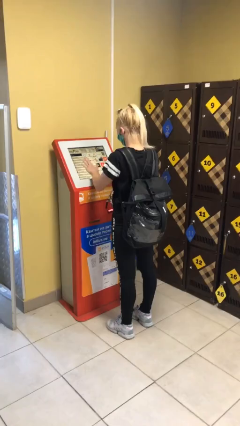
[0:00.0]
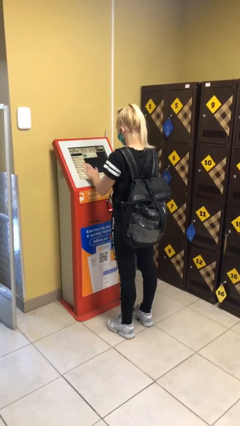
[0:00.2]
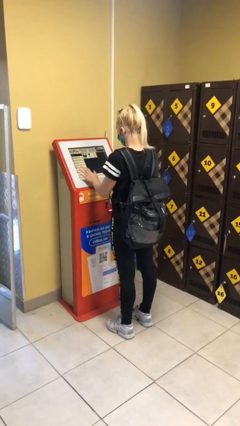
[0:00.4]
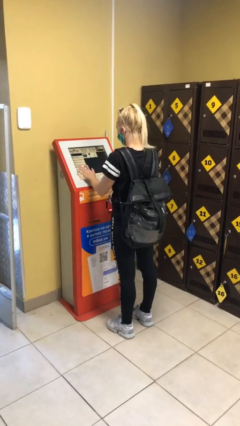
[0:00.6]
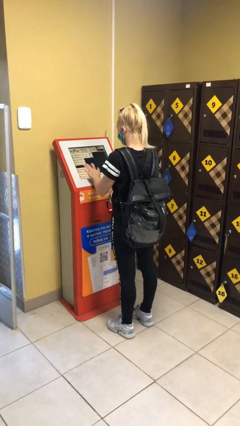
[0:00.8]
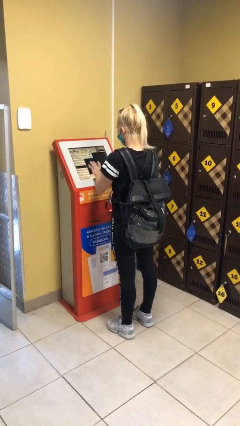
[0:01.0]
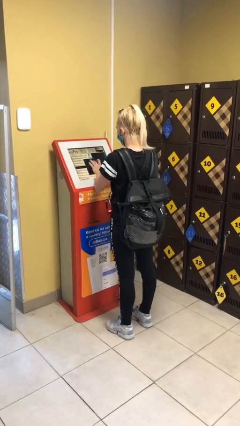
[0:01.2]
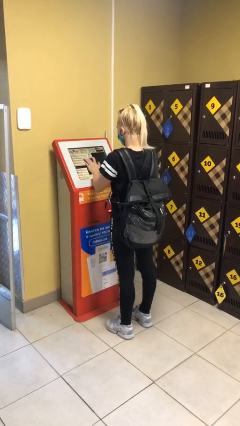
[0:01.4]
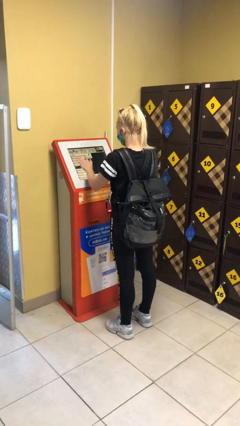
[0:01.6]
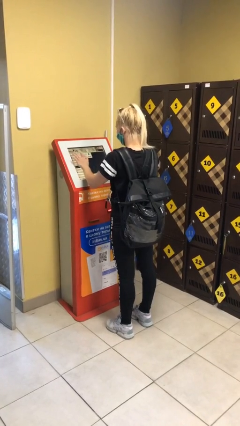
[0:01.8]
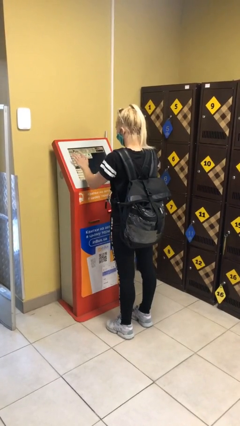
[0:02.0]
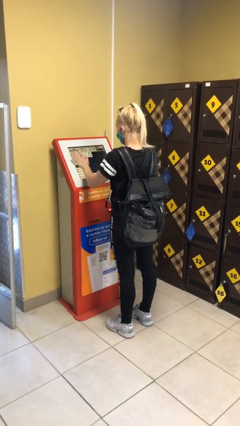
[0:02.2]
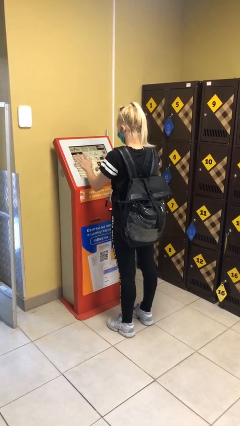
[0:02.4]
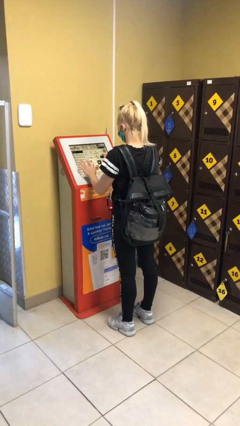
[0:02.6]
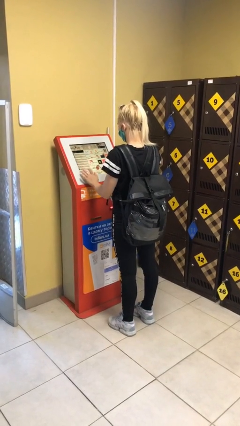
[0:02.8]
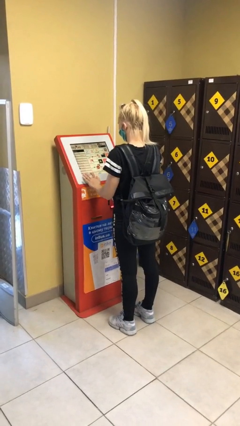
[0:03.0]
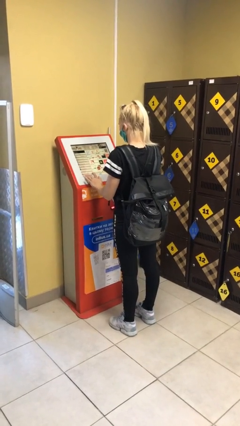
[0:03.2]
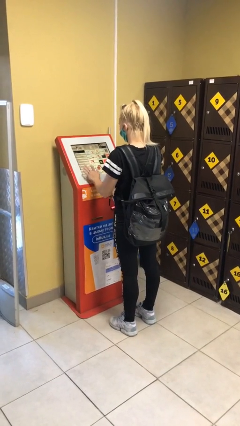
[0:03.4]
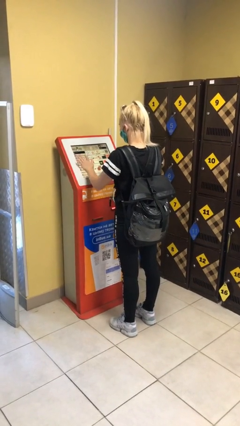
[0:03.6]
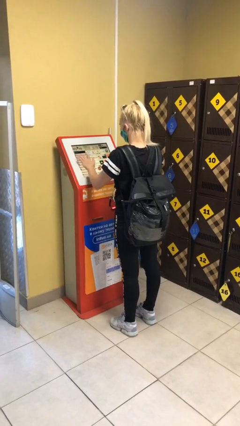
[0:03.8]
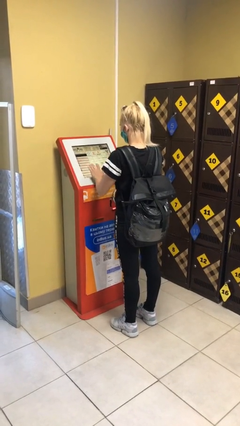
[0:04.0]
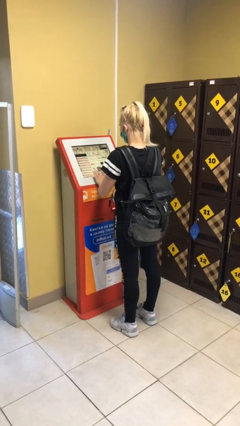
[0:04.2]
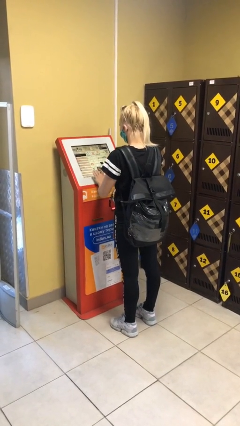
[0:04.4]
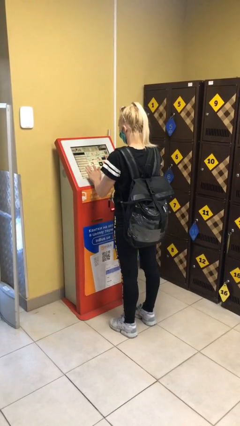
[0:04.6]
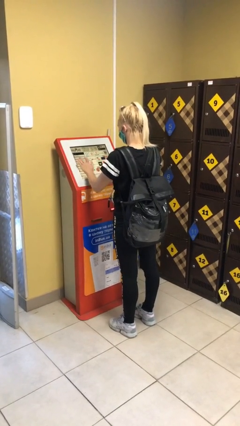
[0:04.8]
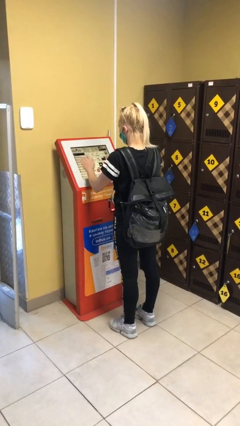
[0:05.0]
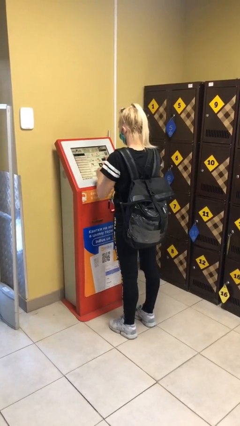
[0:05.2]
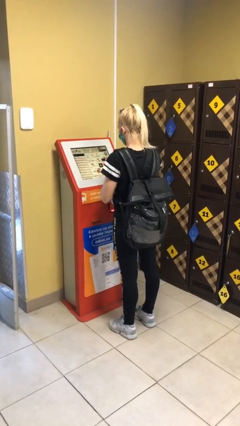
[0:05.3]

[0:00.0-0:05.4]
person purchases from machine

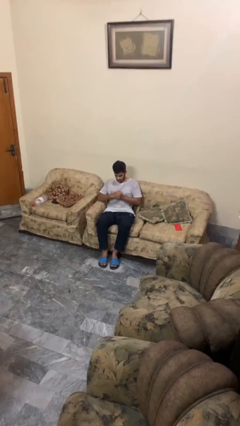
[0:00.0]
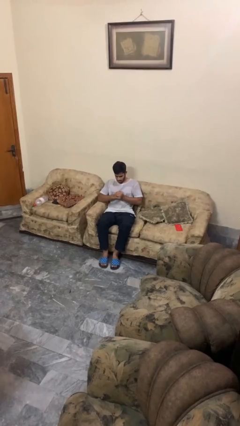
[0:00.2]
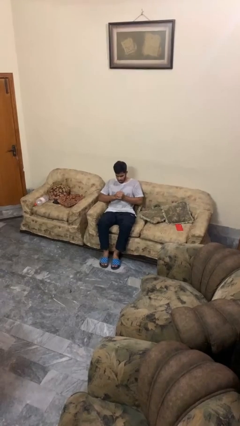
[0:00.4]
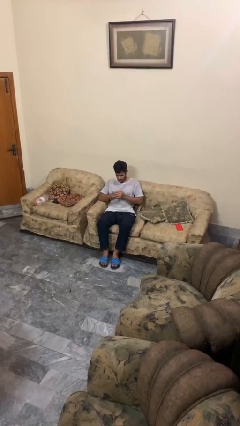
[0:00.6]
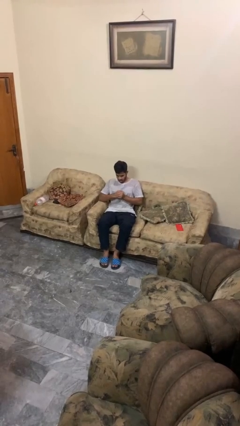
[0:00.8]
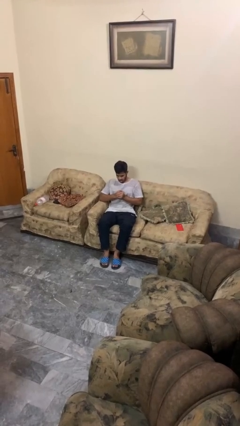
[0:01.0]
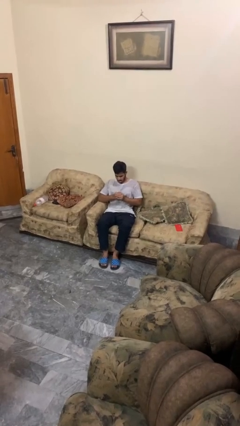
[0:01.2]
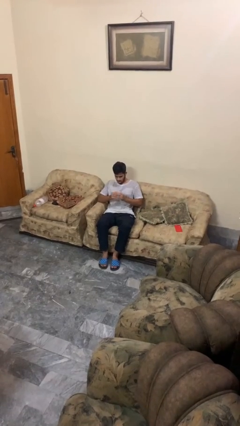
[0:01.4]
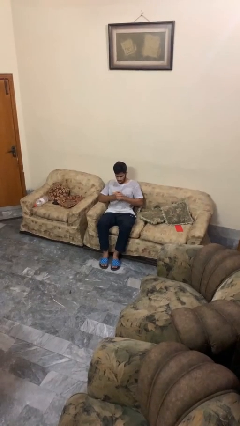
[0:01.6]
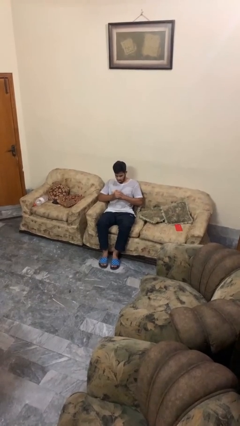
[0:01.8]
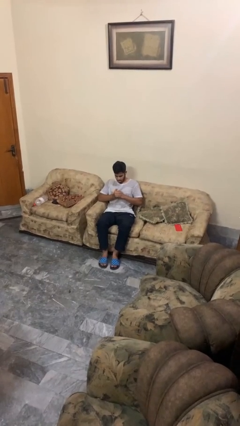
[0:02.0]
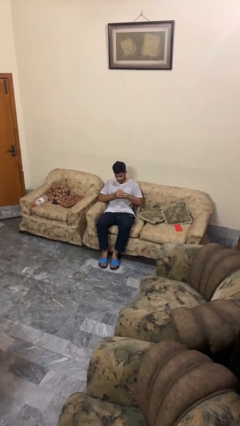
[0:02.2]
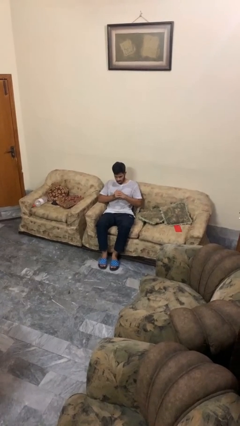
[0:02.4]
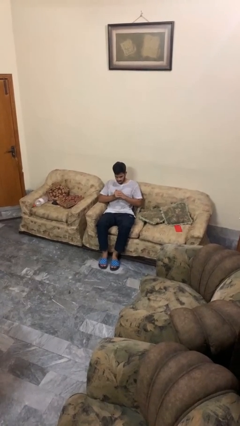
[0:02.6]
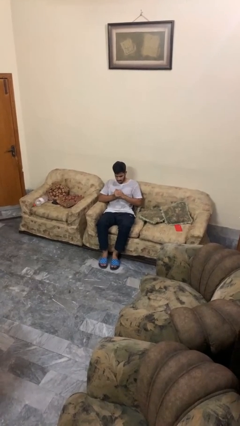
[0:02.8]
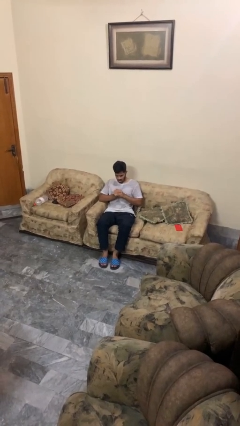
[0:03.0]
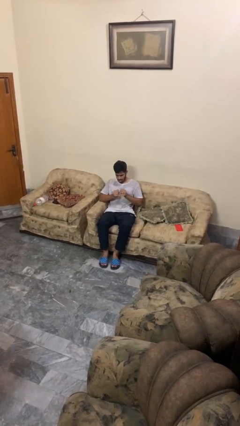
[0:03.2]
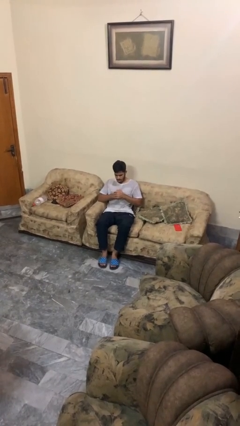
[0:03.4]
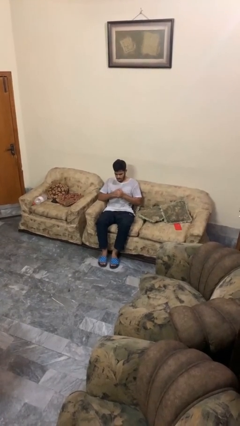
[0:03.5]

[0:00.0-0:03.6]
person cracks knuckles

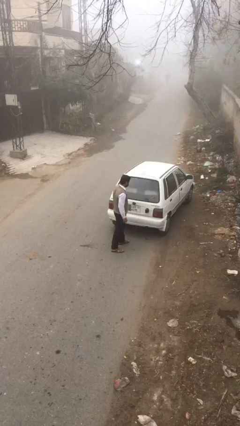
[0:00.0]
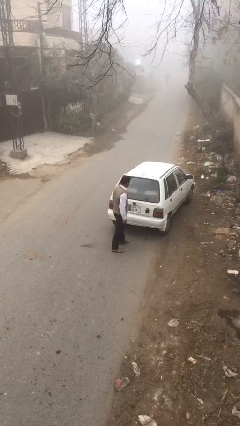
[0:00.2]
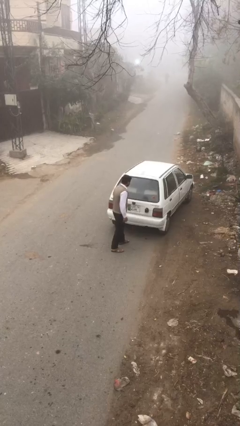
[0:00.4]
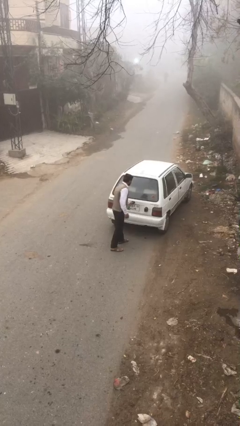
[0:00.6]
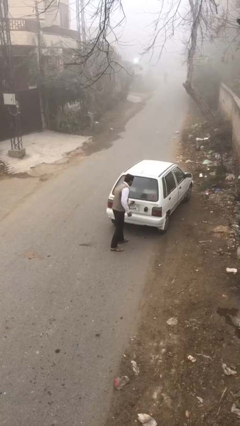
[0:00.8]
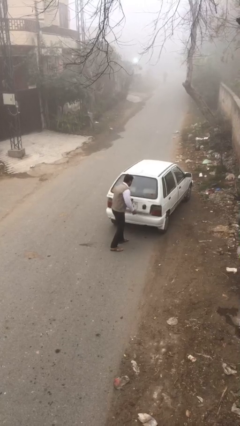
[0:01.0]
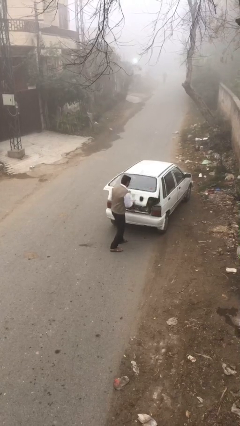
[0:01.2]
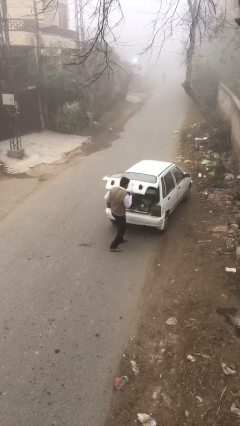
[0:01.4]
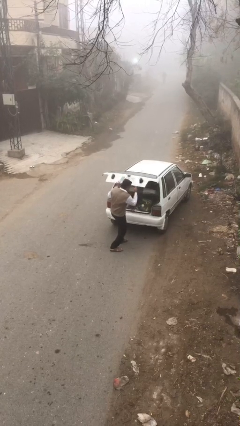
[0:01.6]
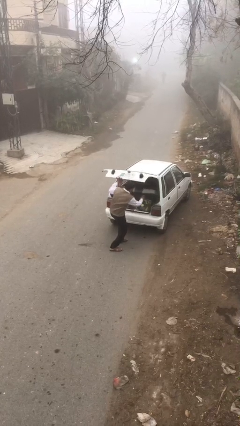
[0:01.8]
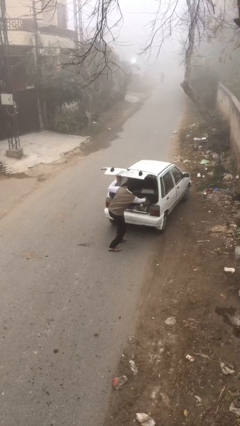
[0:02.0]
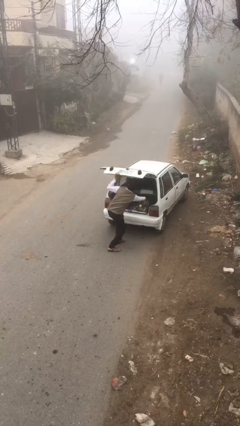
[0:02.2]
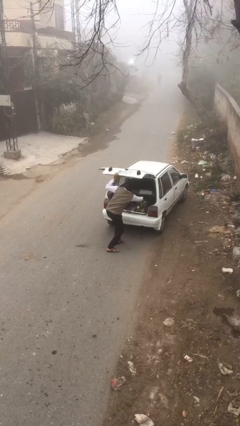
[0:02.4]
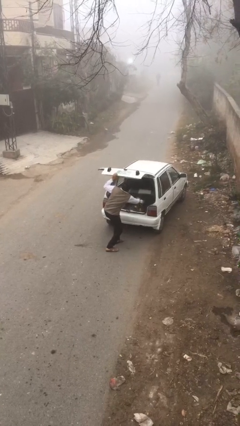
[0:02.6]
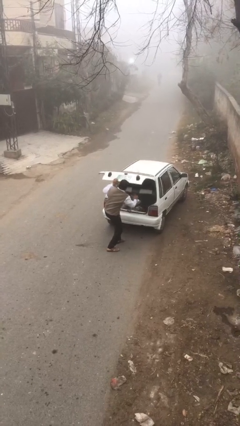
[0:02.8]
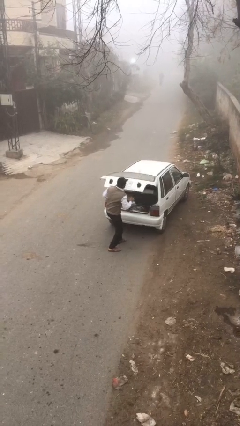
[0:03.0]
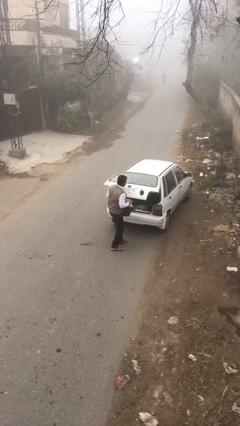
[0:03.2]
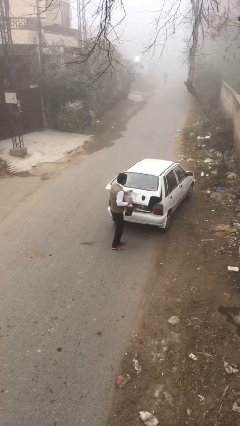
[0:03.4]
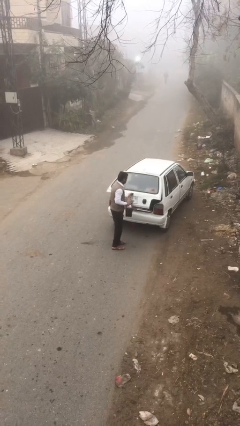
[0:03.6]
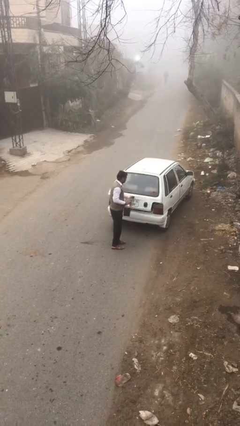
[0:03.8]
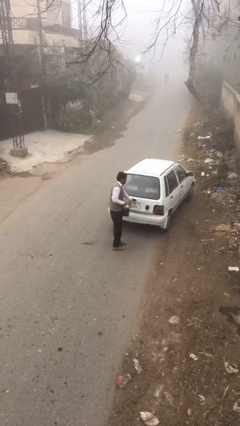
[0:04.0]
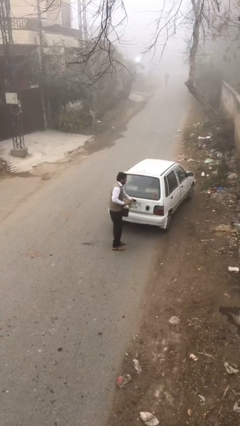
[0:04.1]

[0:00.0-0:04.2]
person unloads car

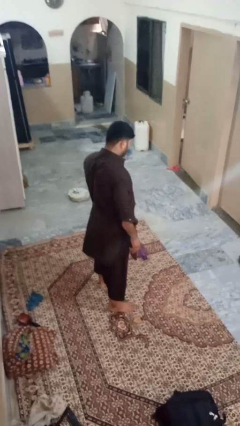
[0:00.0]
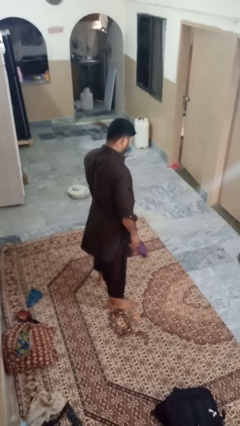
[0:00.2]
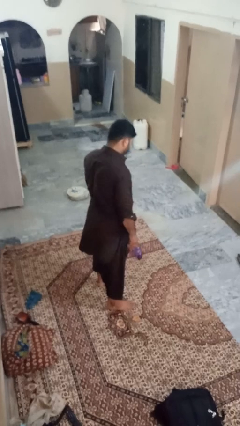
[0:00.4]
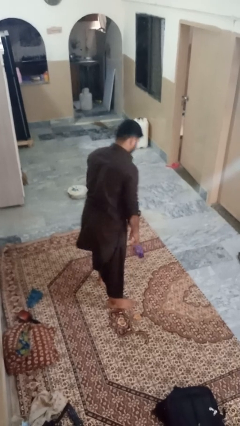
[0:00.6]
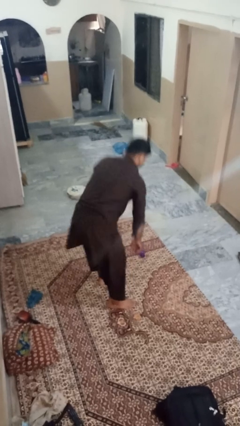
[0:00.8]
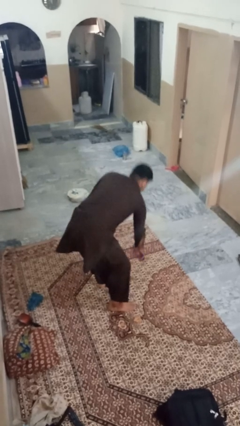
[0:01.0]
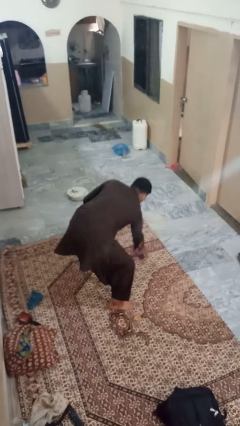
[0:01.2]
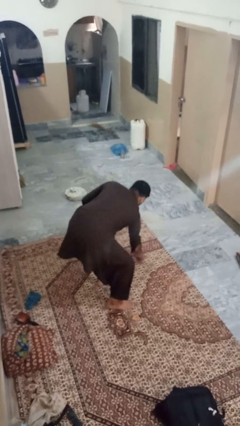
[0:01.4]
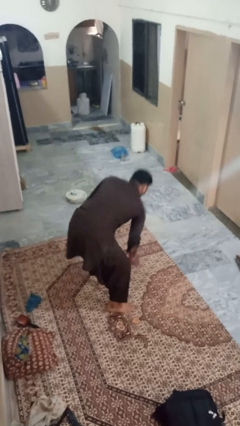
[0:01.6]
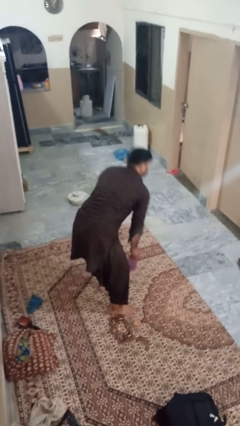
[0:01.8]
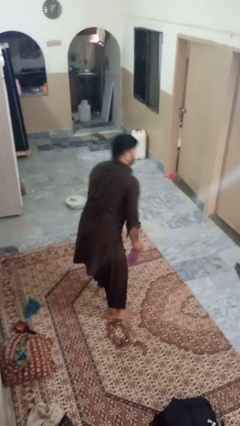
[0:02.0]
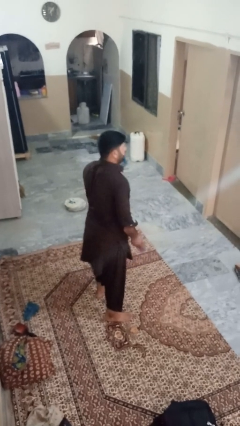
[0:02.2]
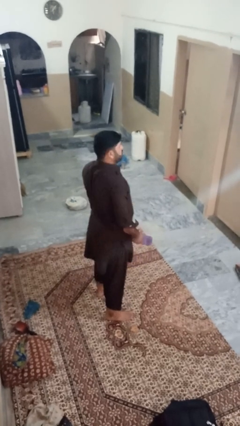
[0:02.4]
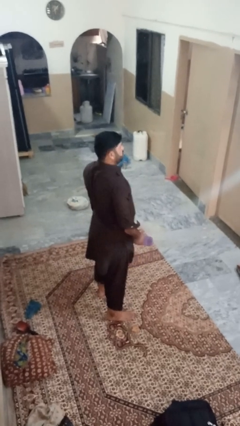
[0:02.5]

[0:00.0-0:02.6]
person picks up object from floor

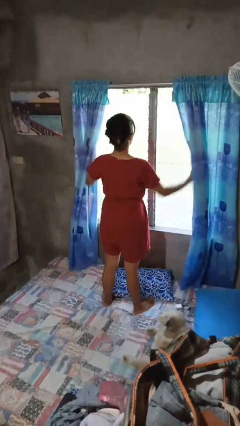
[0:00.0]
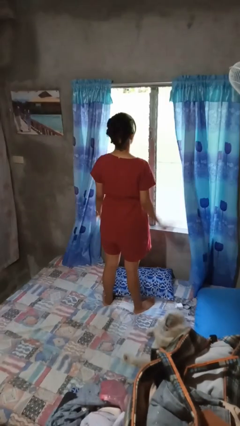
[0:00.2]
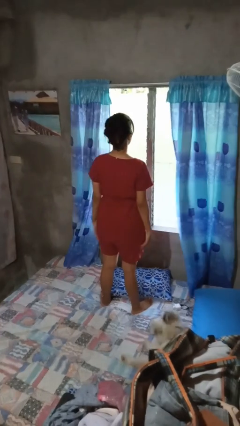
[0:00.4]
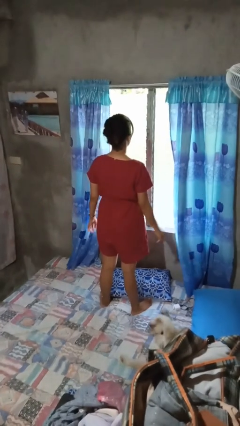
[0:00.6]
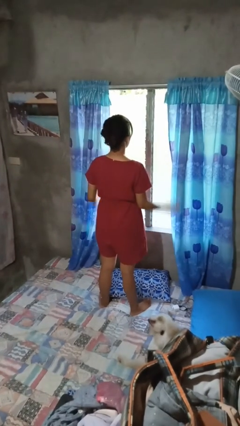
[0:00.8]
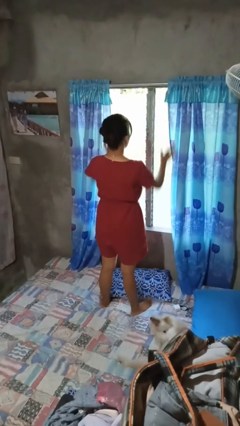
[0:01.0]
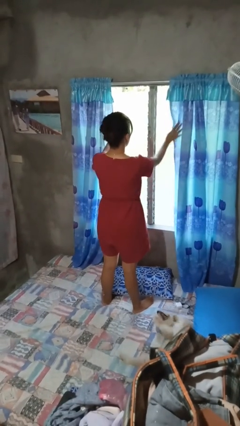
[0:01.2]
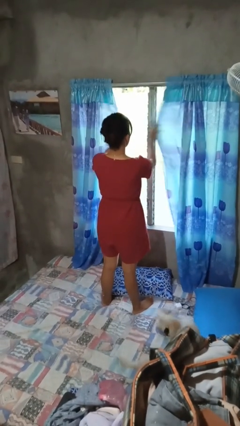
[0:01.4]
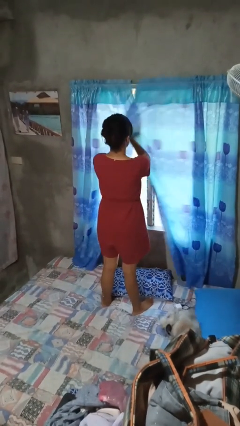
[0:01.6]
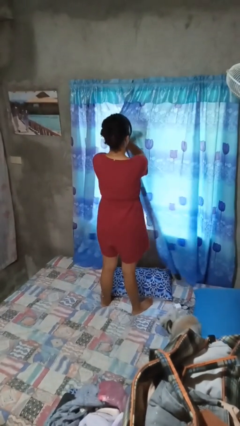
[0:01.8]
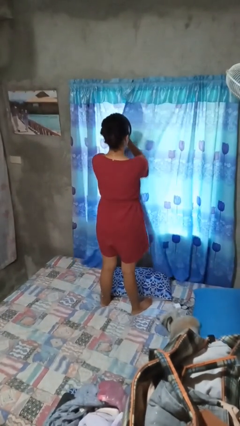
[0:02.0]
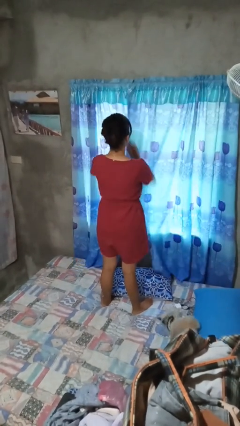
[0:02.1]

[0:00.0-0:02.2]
person closes curtains
